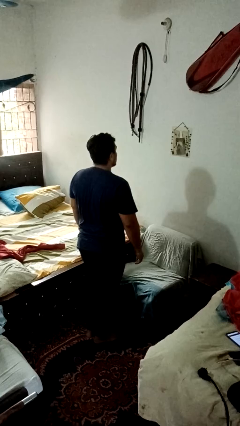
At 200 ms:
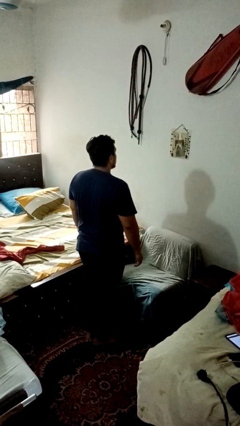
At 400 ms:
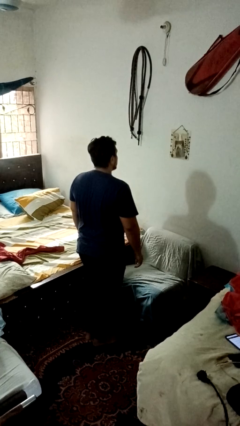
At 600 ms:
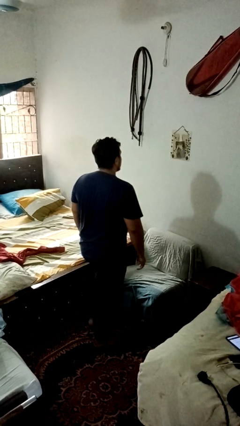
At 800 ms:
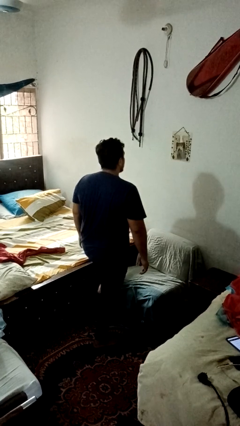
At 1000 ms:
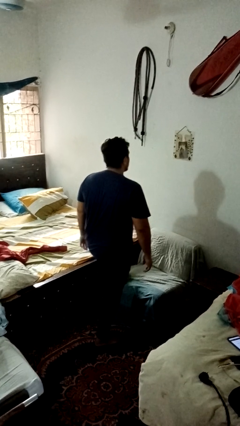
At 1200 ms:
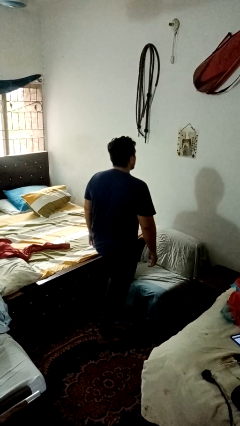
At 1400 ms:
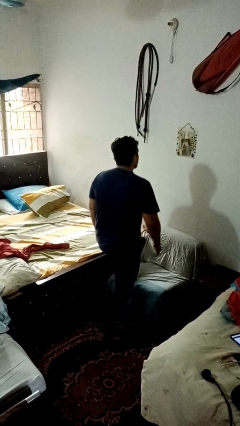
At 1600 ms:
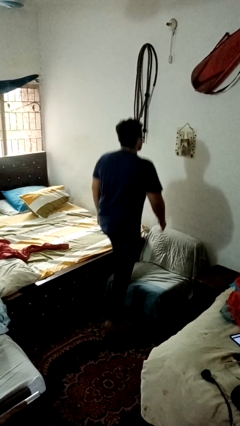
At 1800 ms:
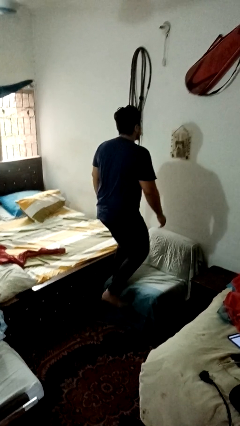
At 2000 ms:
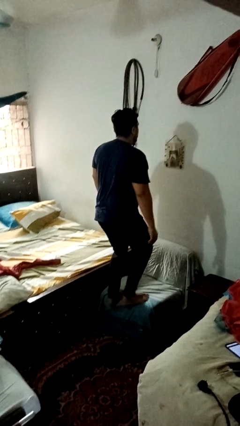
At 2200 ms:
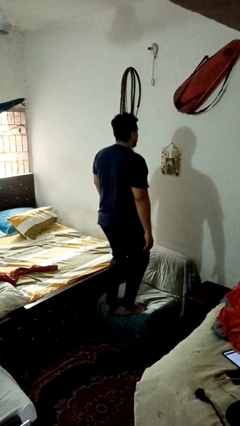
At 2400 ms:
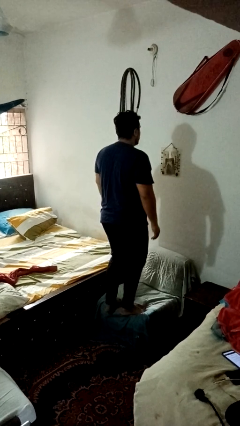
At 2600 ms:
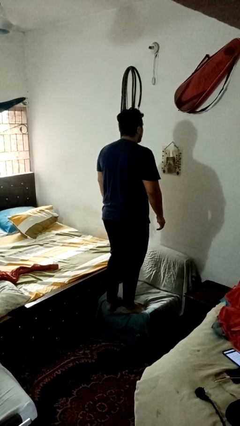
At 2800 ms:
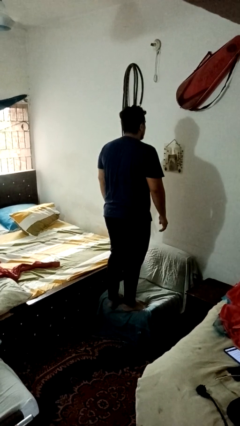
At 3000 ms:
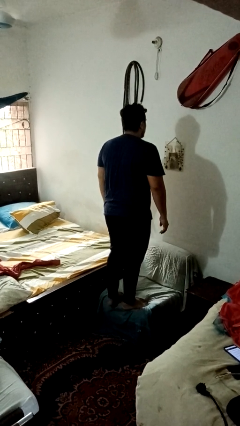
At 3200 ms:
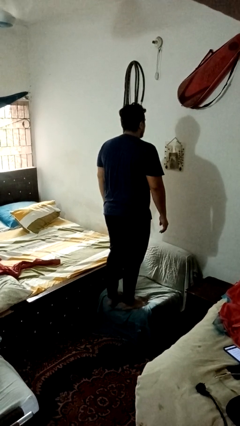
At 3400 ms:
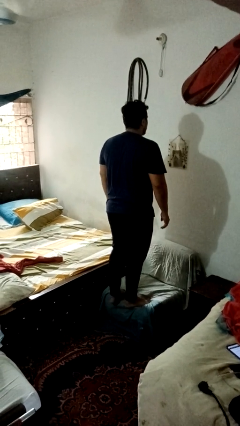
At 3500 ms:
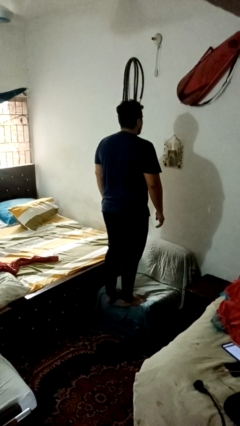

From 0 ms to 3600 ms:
person climbs on couch

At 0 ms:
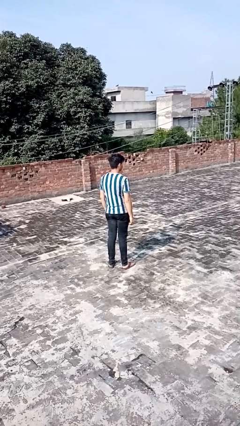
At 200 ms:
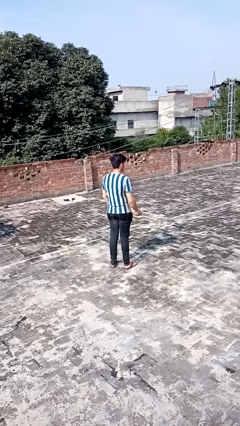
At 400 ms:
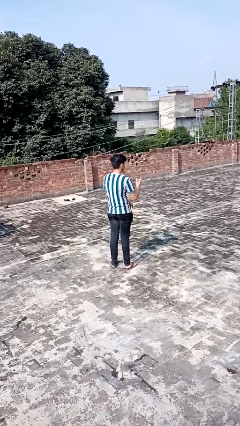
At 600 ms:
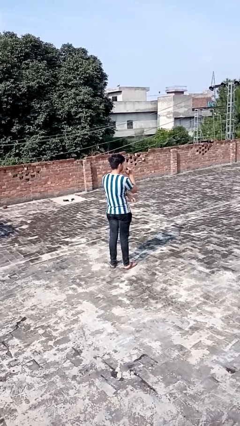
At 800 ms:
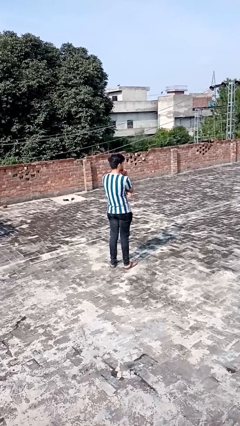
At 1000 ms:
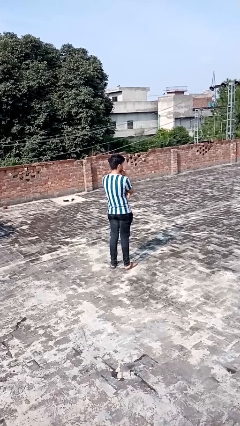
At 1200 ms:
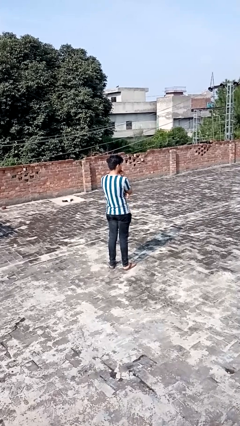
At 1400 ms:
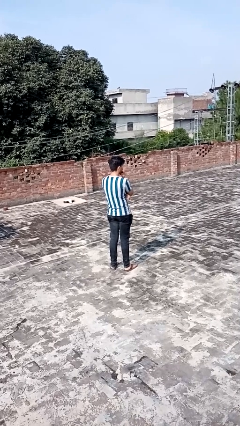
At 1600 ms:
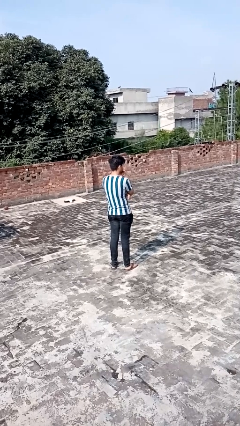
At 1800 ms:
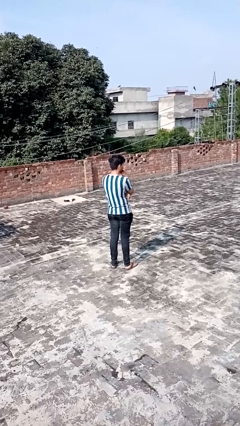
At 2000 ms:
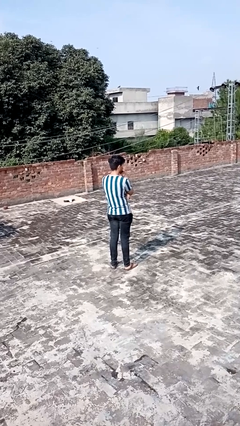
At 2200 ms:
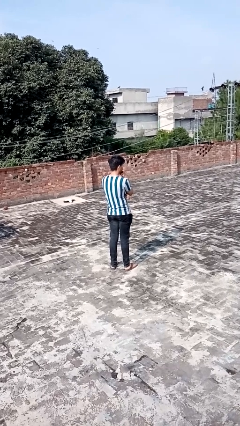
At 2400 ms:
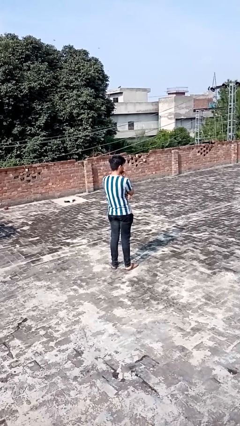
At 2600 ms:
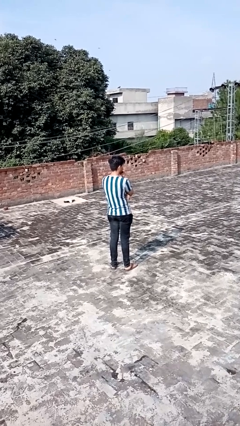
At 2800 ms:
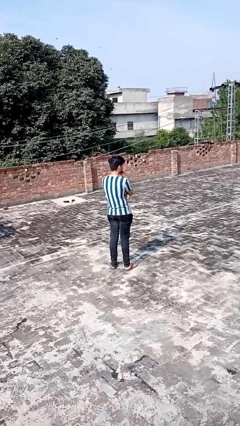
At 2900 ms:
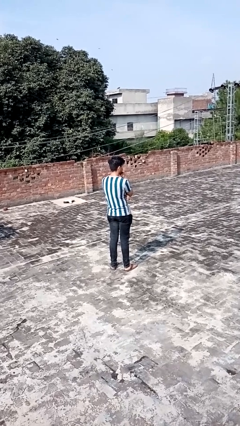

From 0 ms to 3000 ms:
person strokes chin

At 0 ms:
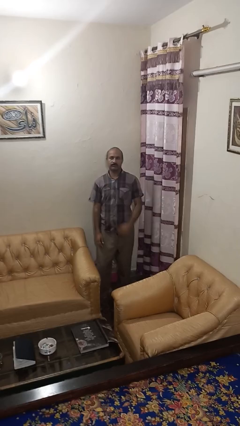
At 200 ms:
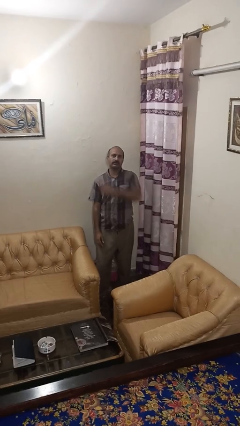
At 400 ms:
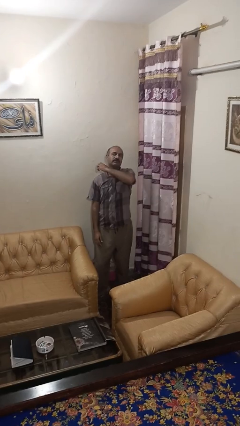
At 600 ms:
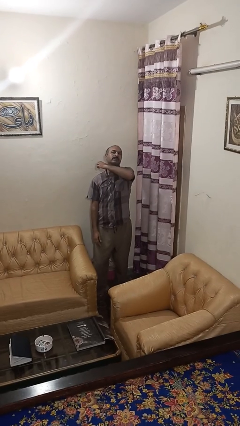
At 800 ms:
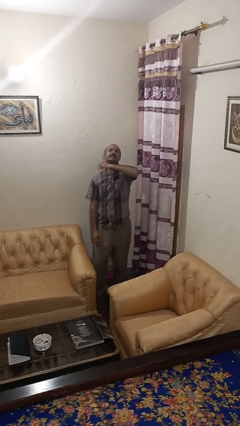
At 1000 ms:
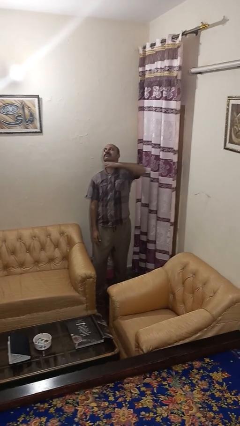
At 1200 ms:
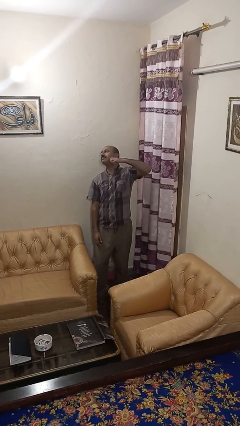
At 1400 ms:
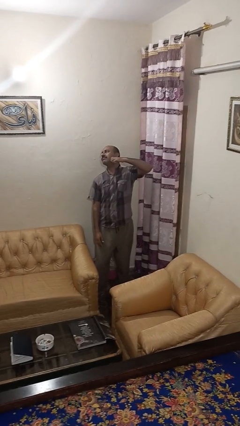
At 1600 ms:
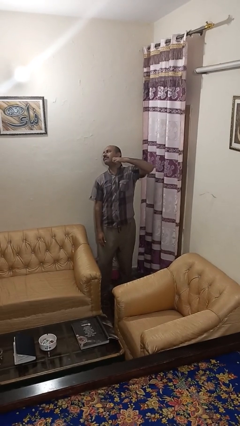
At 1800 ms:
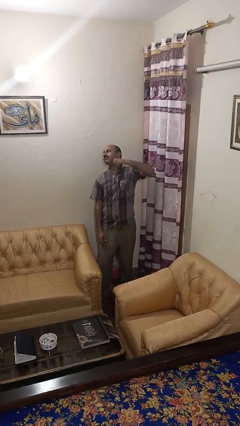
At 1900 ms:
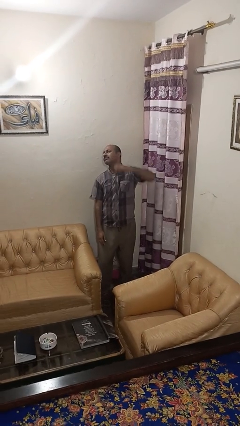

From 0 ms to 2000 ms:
person gestures cut

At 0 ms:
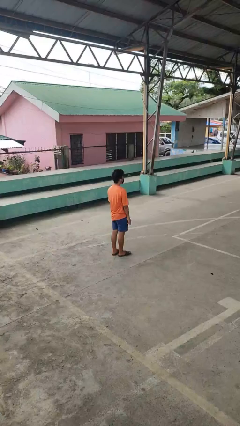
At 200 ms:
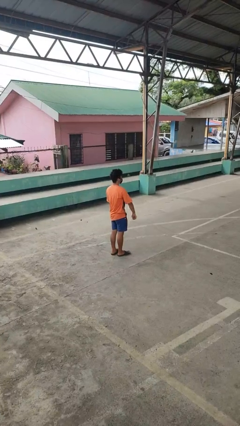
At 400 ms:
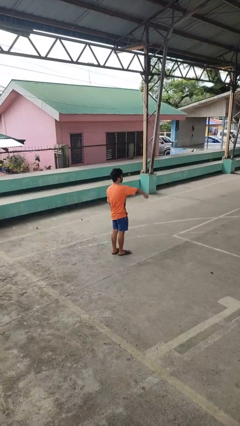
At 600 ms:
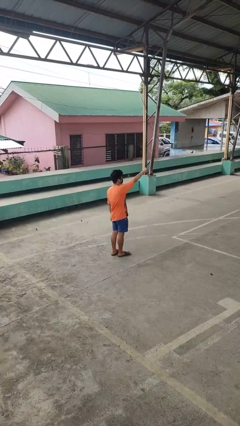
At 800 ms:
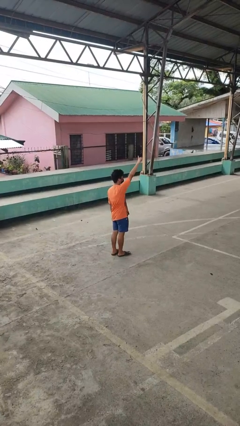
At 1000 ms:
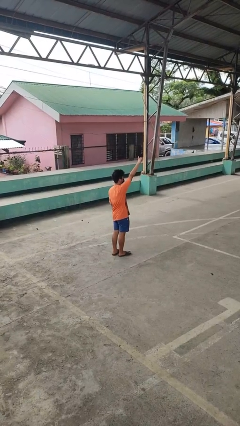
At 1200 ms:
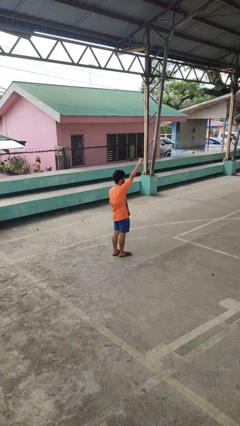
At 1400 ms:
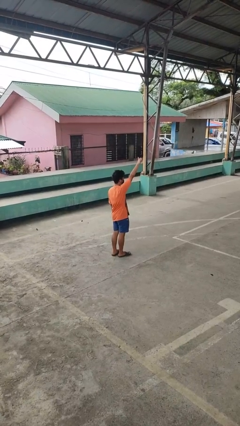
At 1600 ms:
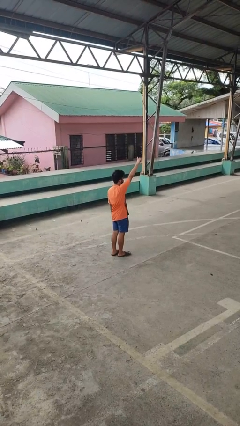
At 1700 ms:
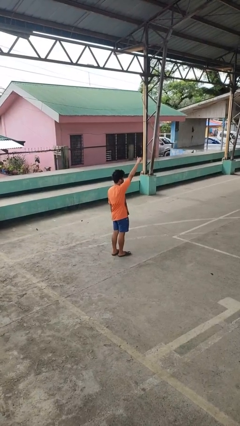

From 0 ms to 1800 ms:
person gestures swipe up

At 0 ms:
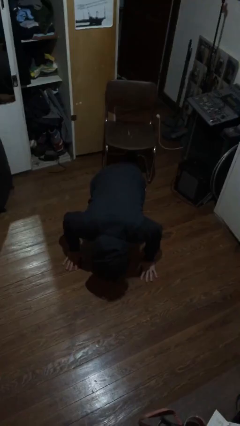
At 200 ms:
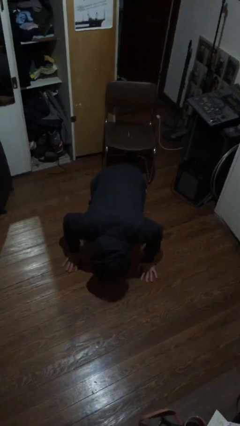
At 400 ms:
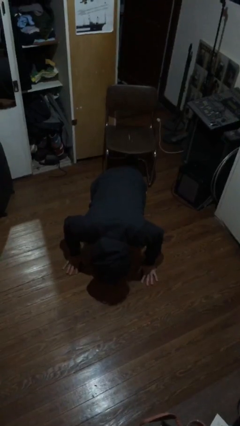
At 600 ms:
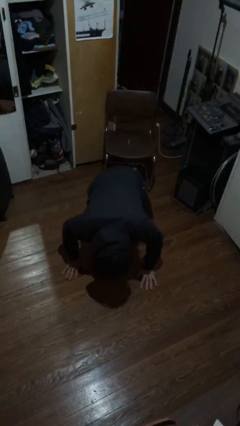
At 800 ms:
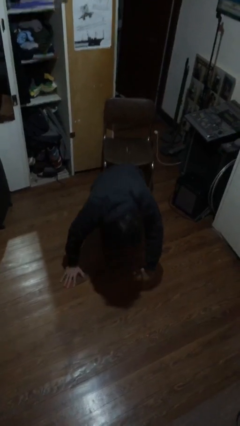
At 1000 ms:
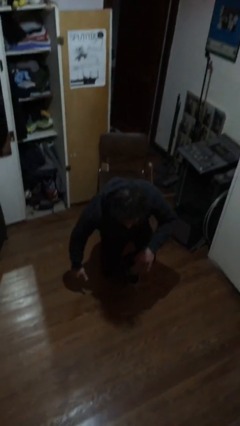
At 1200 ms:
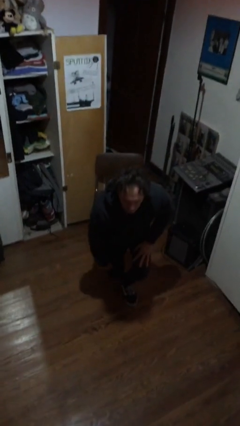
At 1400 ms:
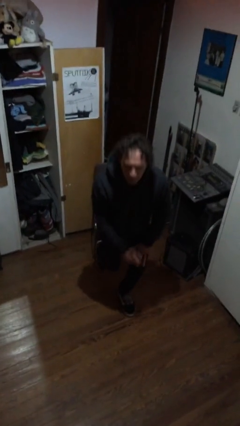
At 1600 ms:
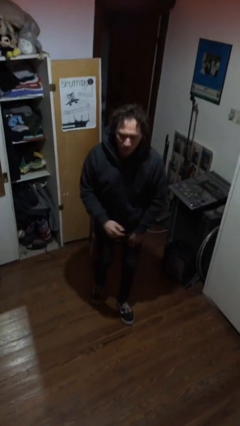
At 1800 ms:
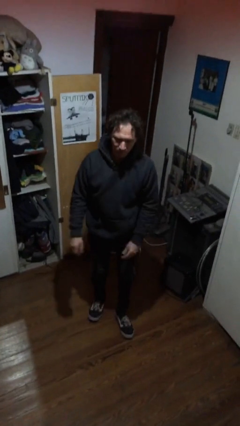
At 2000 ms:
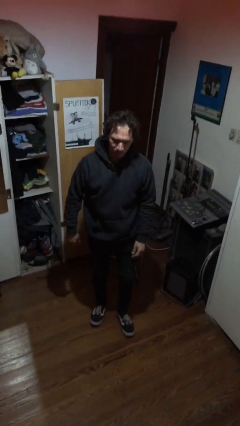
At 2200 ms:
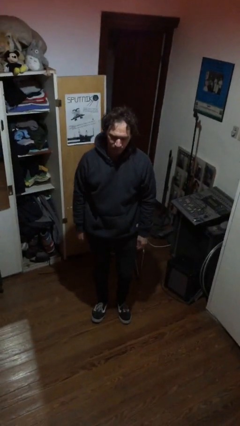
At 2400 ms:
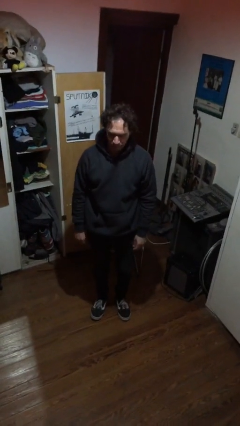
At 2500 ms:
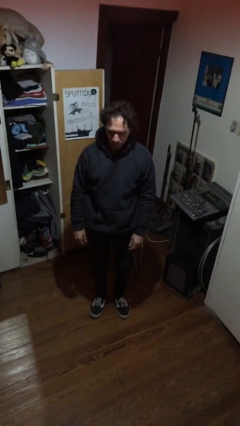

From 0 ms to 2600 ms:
person stands up from floor

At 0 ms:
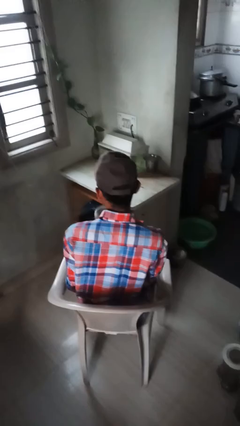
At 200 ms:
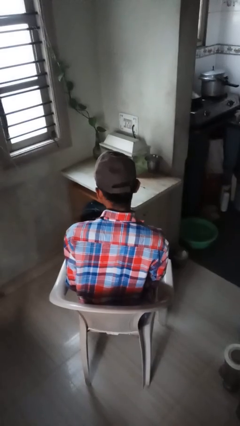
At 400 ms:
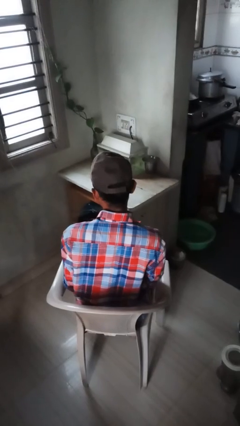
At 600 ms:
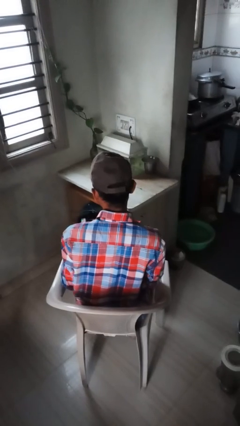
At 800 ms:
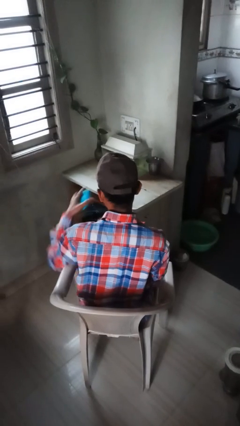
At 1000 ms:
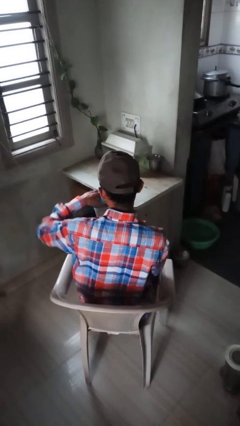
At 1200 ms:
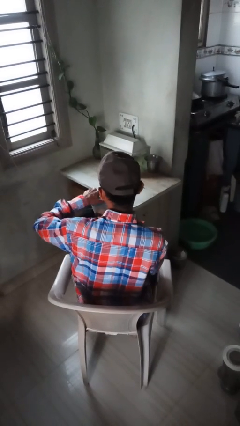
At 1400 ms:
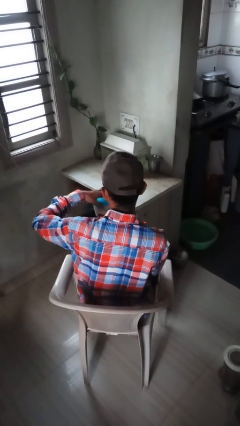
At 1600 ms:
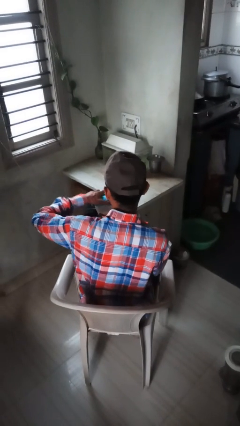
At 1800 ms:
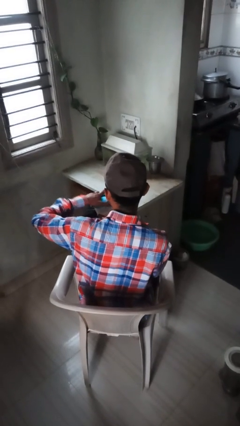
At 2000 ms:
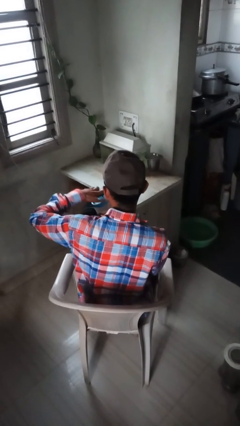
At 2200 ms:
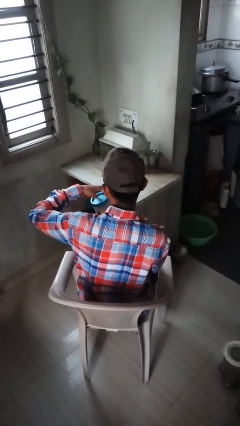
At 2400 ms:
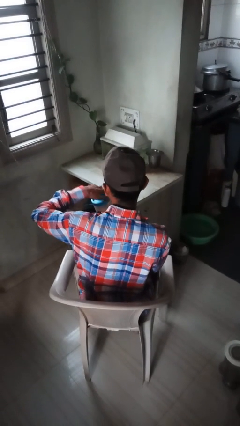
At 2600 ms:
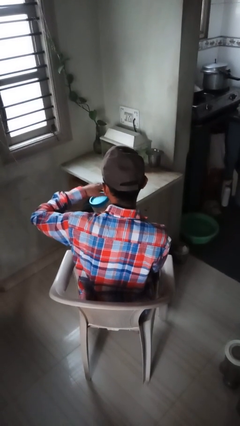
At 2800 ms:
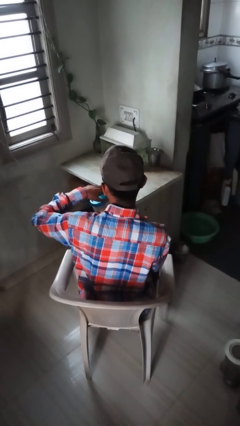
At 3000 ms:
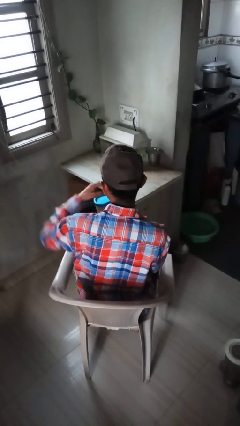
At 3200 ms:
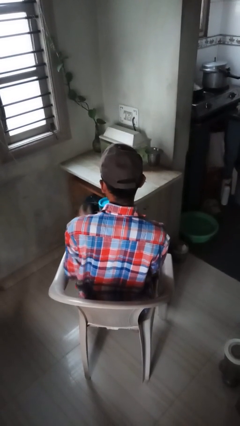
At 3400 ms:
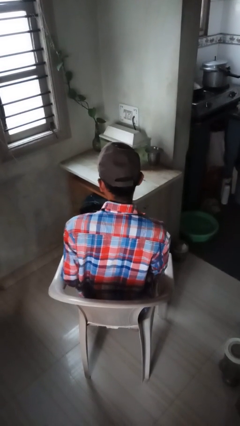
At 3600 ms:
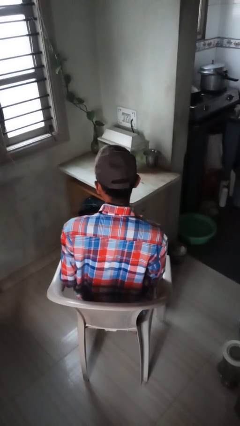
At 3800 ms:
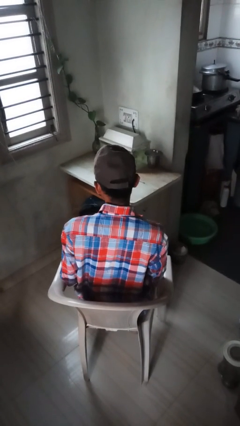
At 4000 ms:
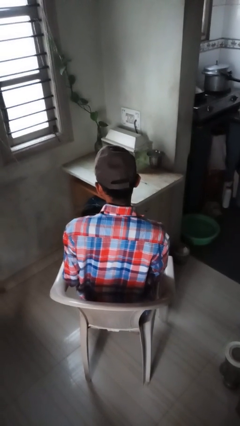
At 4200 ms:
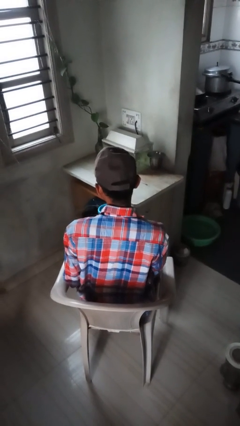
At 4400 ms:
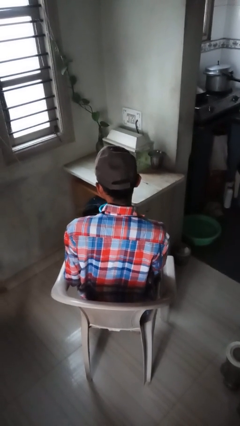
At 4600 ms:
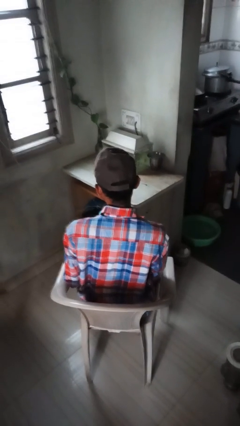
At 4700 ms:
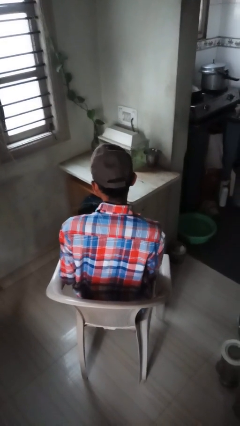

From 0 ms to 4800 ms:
person closes jar
